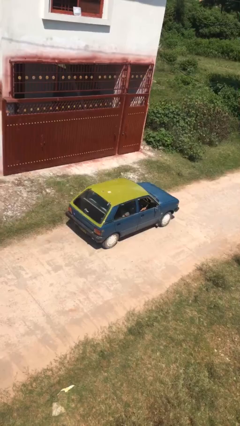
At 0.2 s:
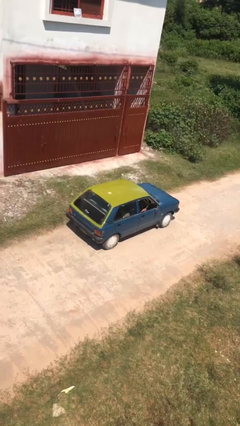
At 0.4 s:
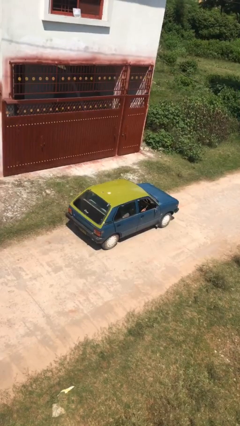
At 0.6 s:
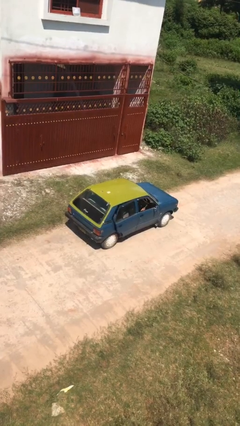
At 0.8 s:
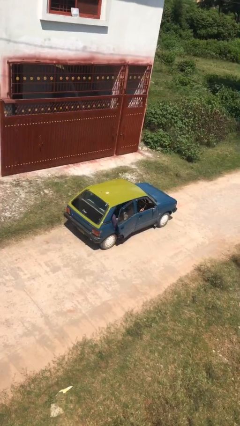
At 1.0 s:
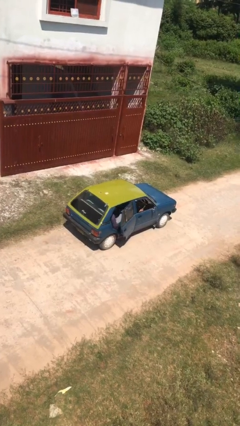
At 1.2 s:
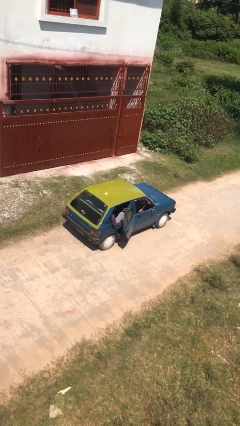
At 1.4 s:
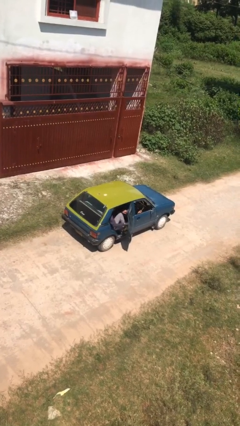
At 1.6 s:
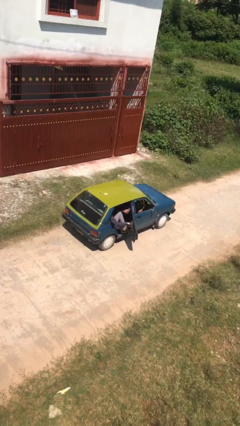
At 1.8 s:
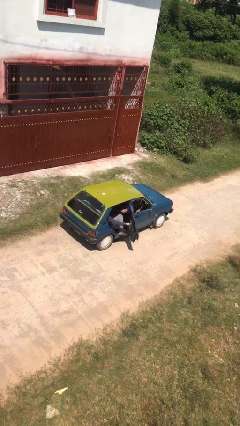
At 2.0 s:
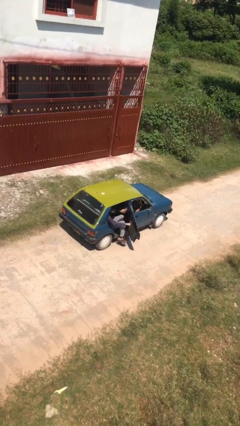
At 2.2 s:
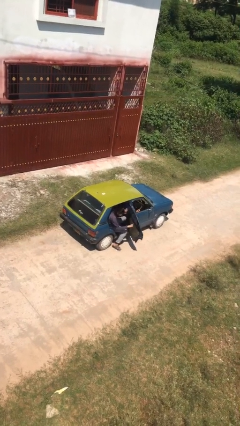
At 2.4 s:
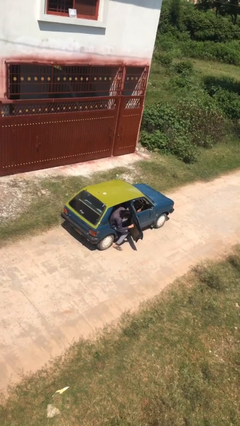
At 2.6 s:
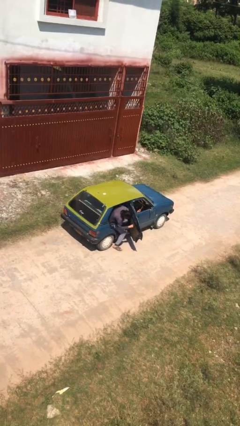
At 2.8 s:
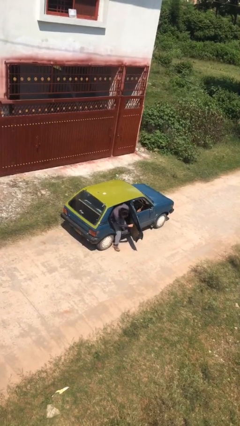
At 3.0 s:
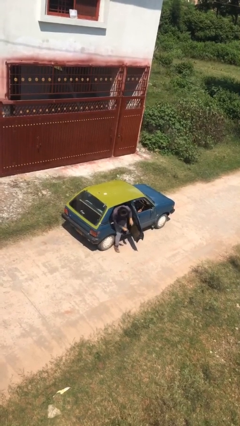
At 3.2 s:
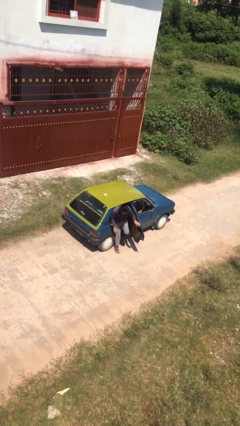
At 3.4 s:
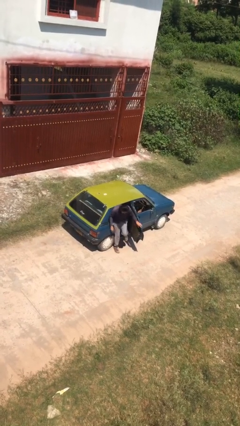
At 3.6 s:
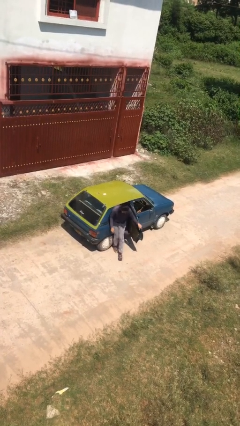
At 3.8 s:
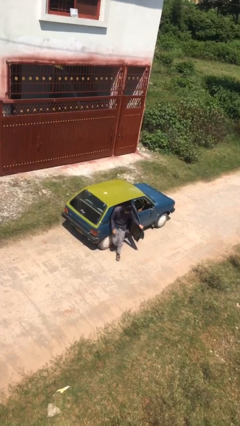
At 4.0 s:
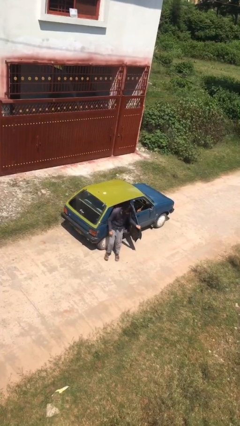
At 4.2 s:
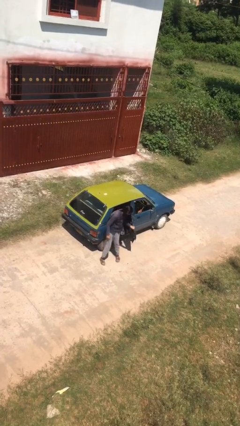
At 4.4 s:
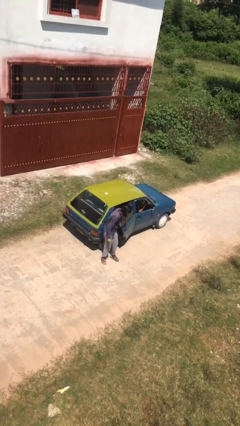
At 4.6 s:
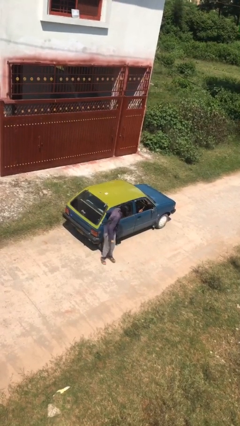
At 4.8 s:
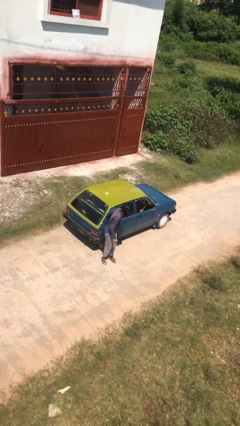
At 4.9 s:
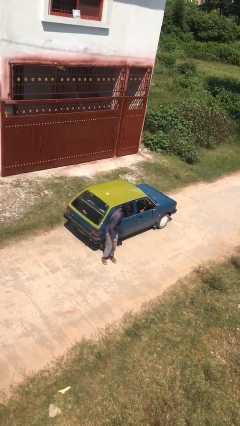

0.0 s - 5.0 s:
car drops off person

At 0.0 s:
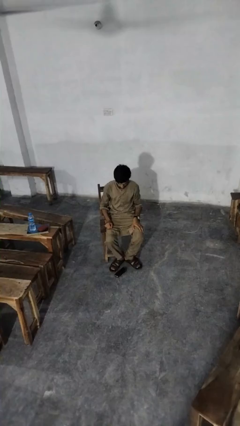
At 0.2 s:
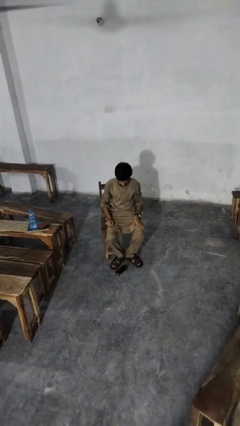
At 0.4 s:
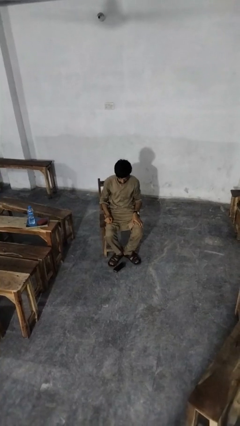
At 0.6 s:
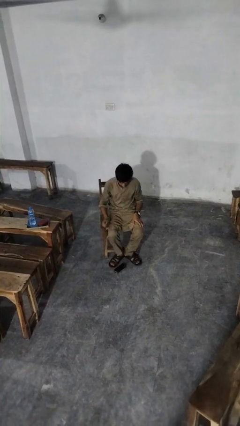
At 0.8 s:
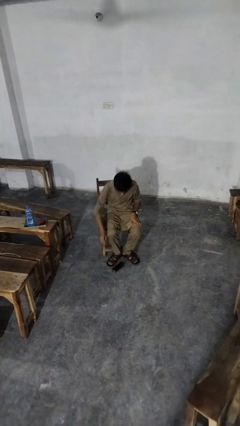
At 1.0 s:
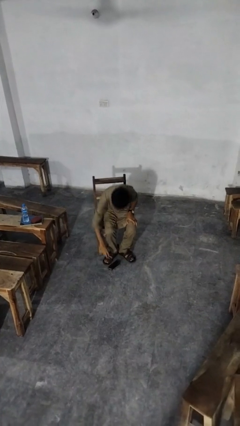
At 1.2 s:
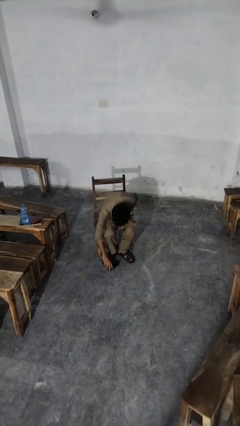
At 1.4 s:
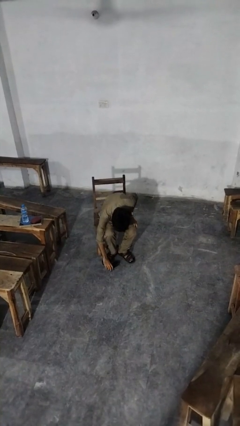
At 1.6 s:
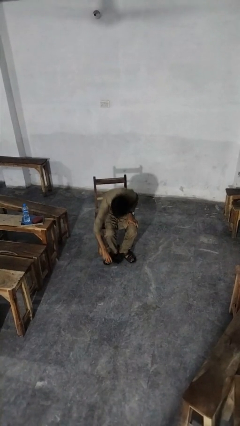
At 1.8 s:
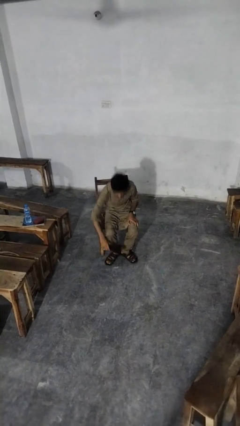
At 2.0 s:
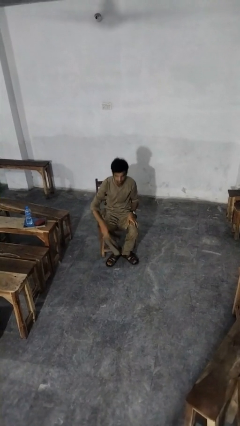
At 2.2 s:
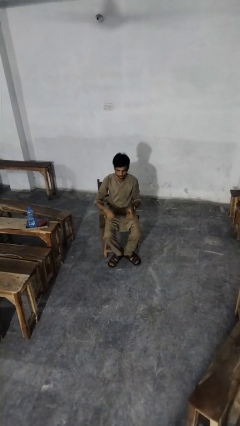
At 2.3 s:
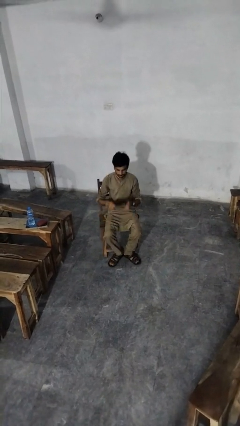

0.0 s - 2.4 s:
person picks up object from floor

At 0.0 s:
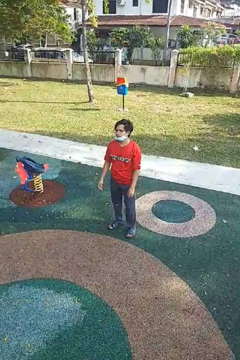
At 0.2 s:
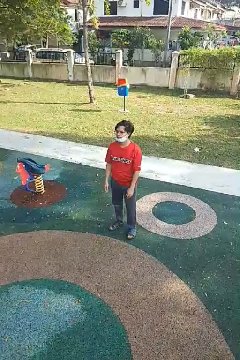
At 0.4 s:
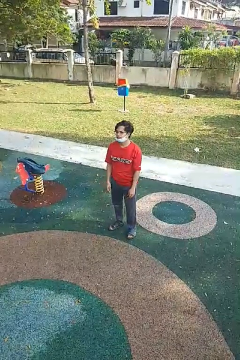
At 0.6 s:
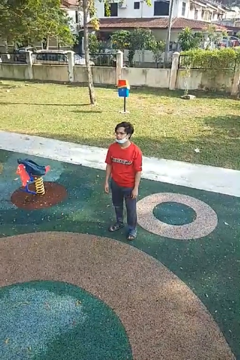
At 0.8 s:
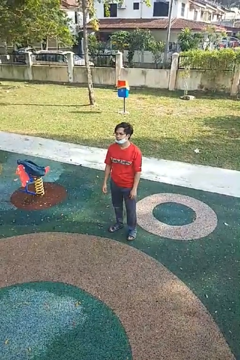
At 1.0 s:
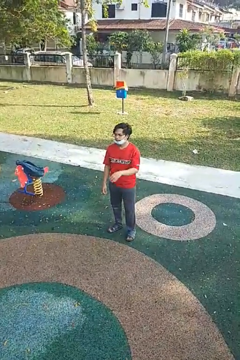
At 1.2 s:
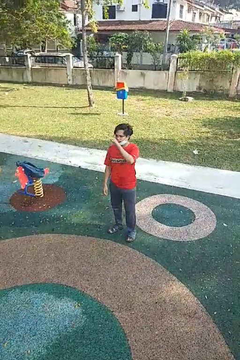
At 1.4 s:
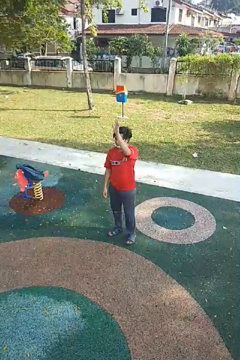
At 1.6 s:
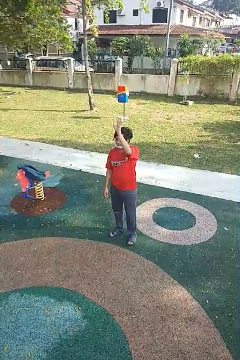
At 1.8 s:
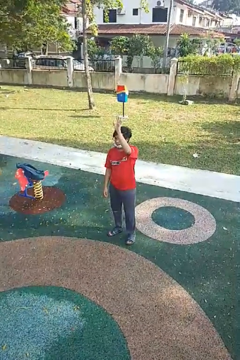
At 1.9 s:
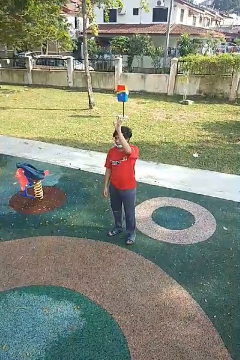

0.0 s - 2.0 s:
person gestures raise hand

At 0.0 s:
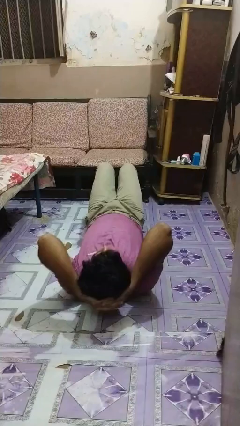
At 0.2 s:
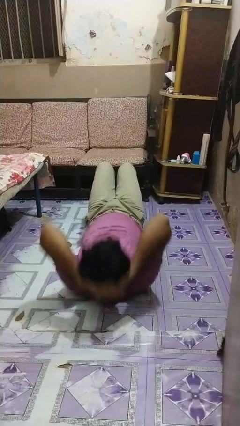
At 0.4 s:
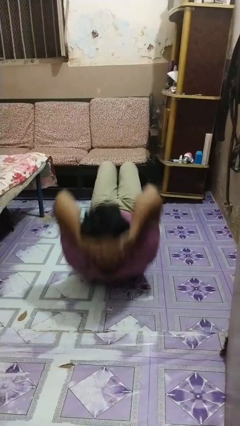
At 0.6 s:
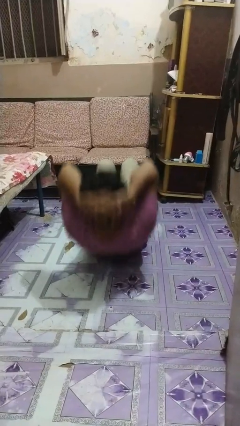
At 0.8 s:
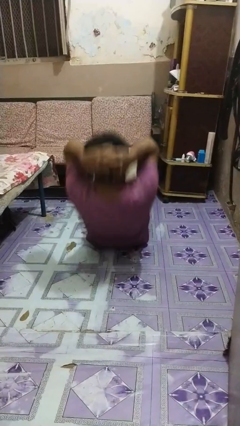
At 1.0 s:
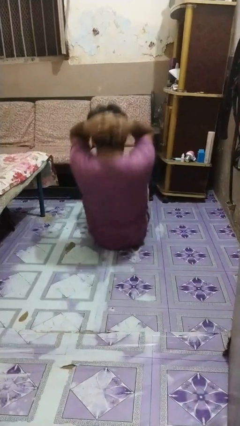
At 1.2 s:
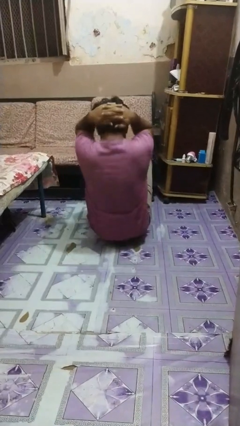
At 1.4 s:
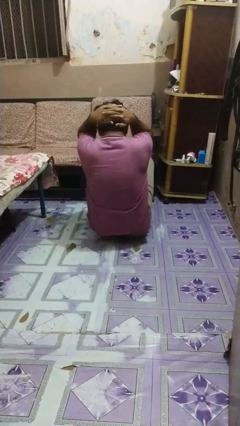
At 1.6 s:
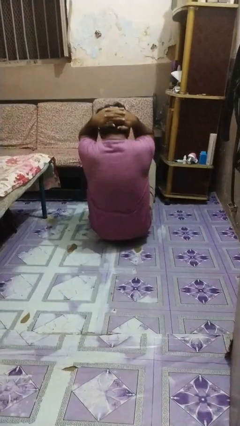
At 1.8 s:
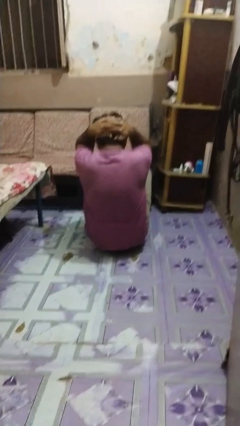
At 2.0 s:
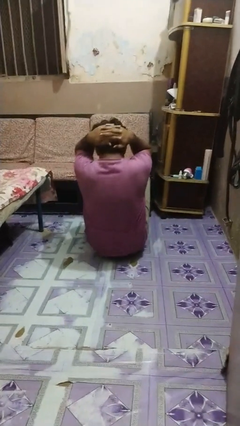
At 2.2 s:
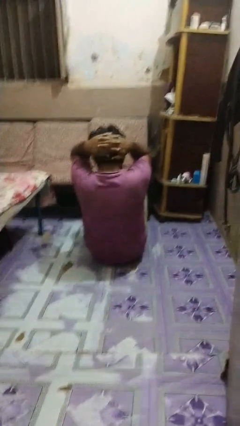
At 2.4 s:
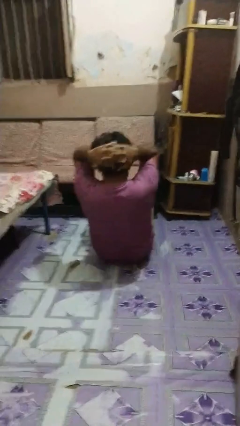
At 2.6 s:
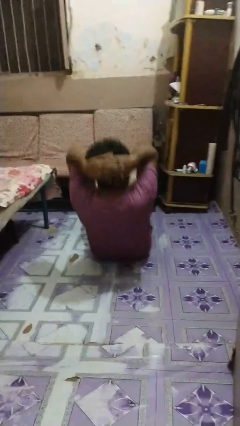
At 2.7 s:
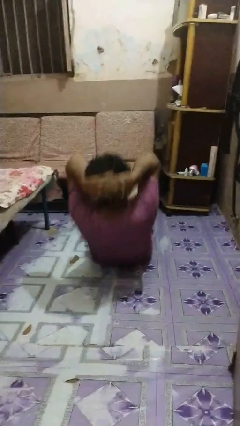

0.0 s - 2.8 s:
person exercises with situp

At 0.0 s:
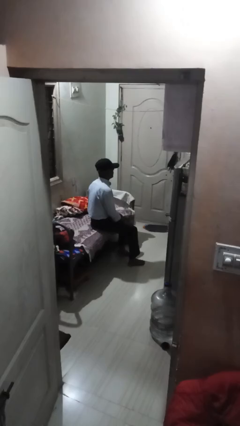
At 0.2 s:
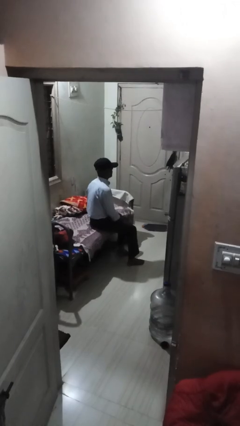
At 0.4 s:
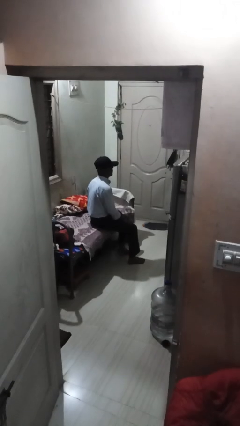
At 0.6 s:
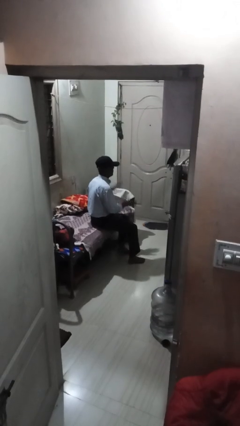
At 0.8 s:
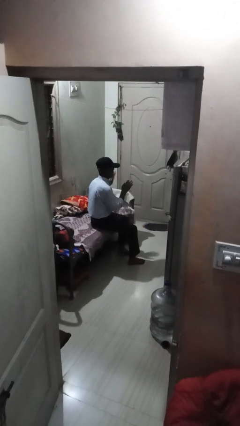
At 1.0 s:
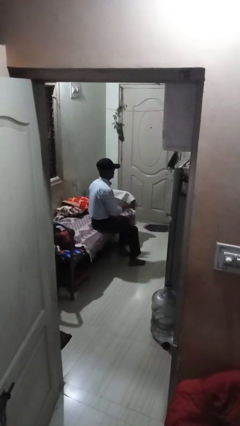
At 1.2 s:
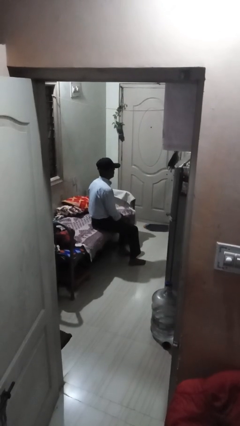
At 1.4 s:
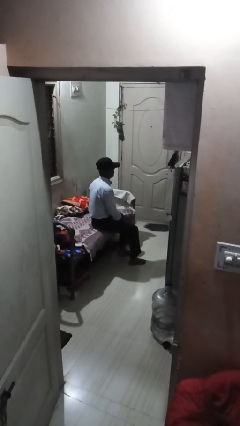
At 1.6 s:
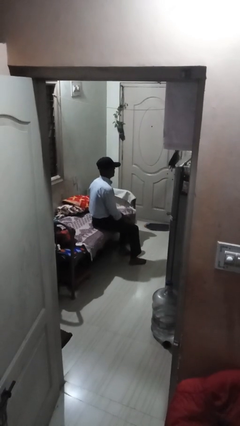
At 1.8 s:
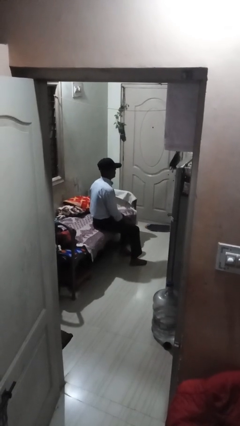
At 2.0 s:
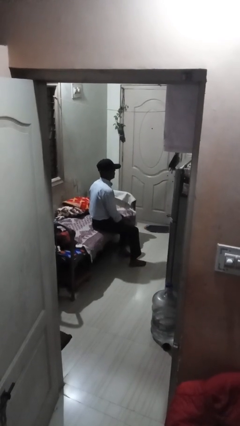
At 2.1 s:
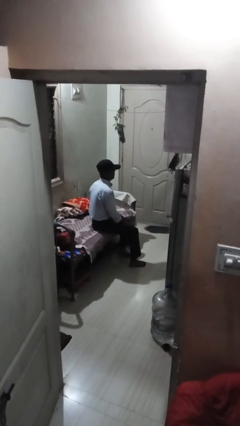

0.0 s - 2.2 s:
person slaps hands on thighs

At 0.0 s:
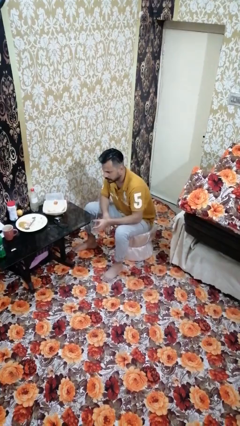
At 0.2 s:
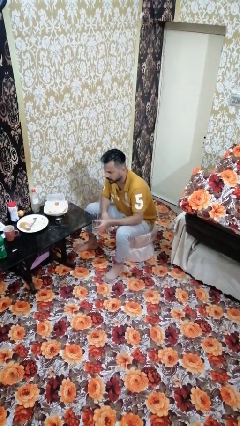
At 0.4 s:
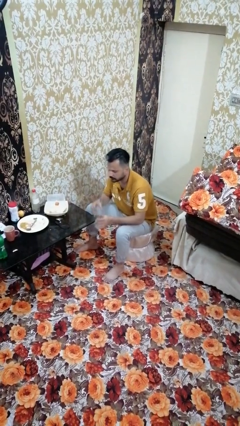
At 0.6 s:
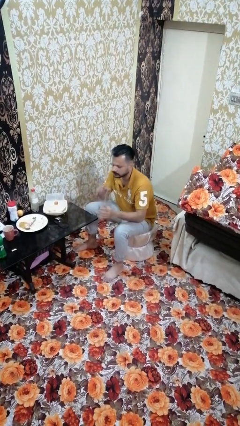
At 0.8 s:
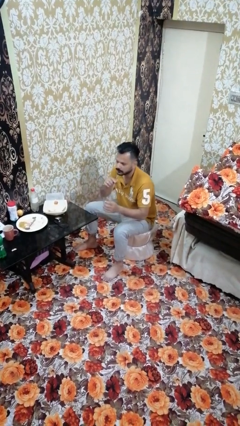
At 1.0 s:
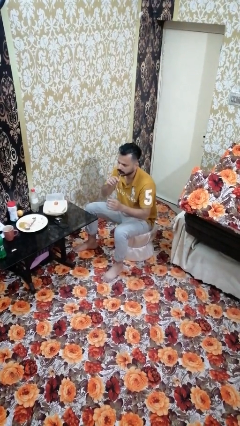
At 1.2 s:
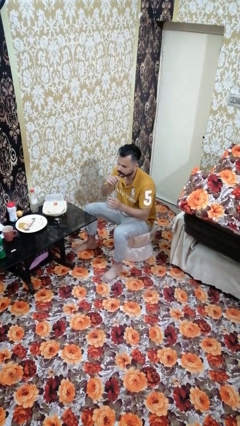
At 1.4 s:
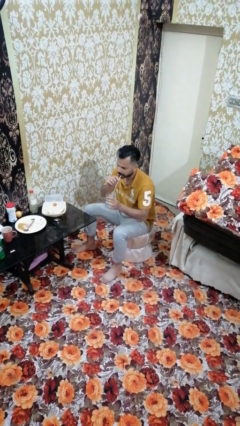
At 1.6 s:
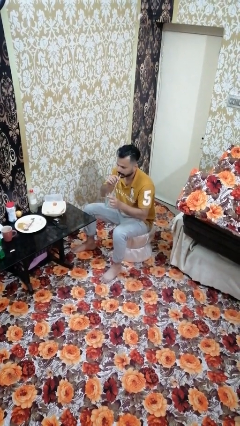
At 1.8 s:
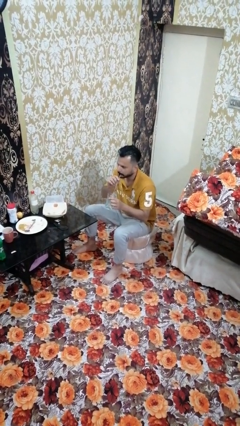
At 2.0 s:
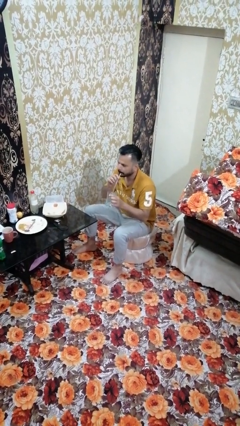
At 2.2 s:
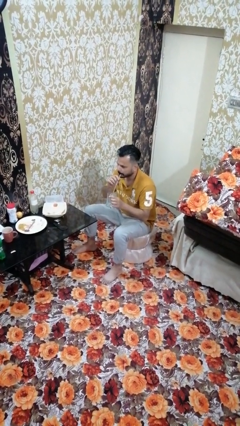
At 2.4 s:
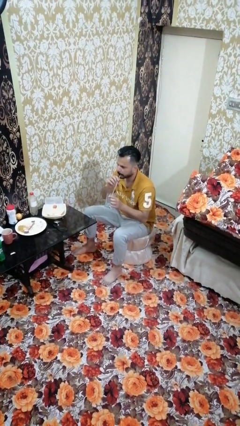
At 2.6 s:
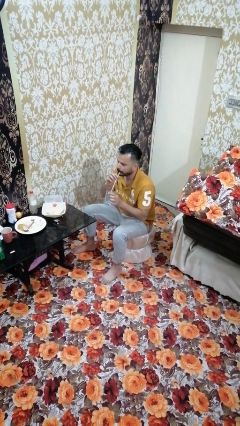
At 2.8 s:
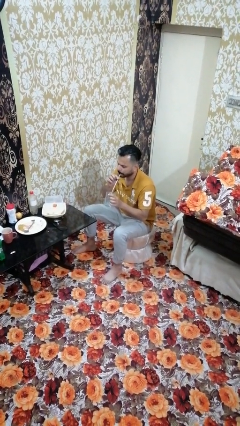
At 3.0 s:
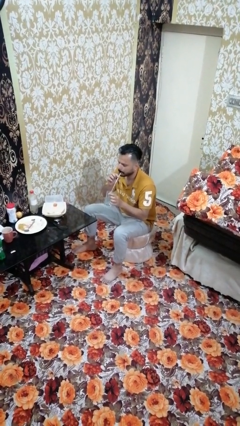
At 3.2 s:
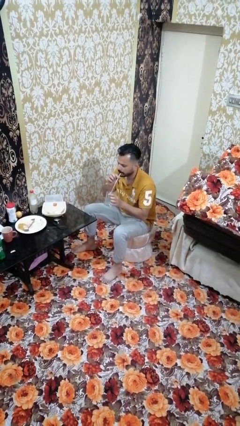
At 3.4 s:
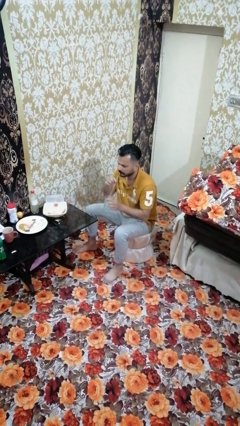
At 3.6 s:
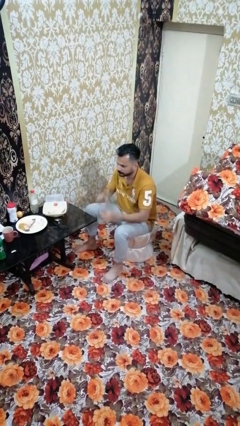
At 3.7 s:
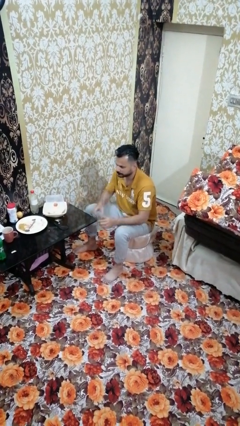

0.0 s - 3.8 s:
person drinks from straw
